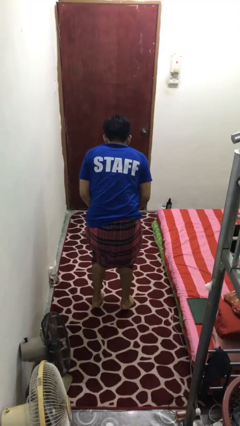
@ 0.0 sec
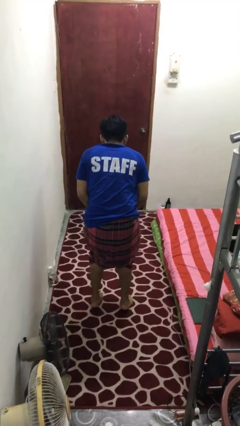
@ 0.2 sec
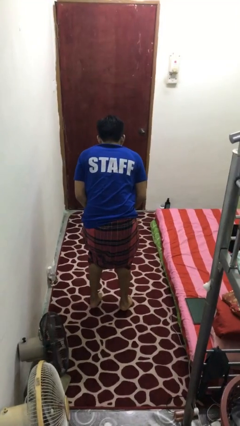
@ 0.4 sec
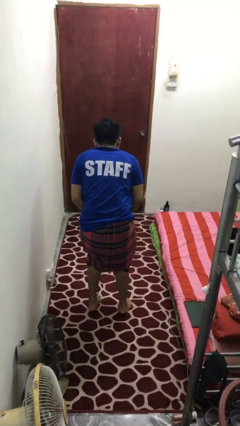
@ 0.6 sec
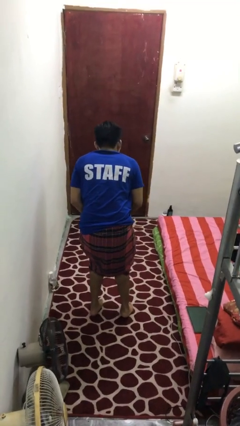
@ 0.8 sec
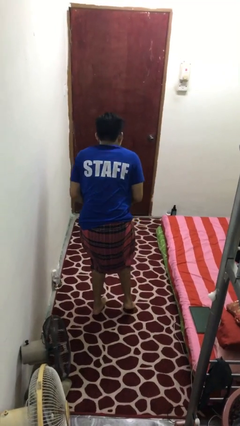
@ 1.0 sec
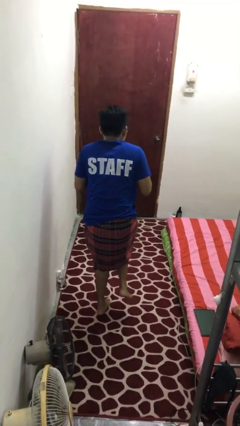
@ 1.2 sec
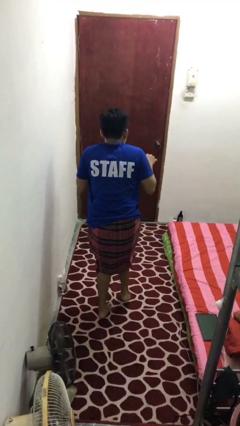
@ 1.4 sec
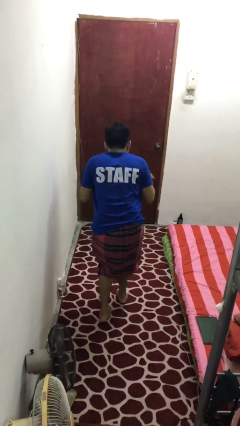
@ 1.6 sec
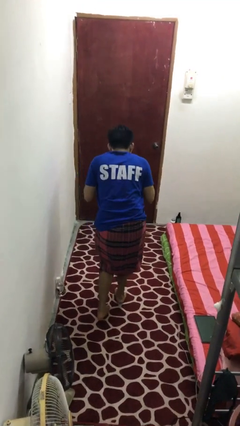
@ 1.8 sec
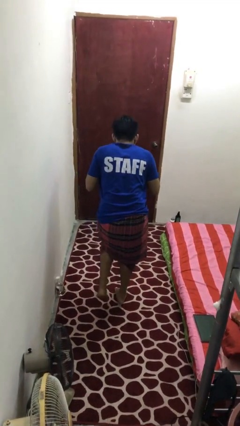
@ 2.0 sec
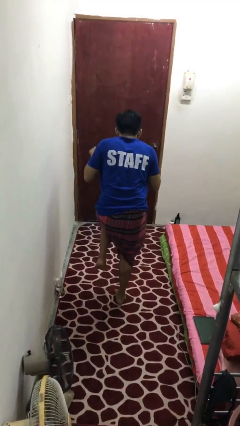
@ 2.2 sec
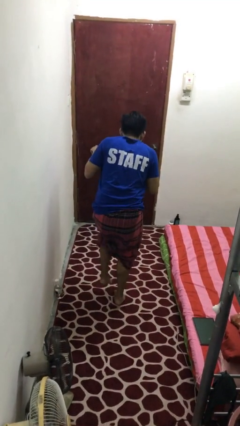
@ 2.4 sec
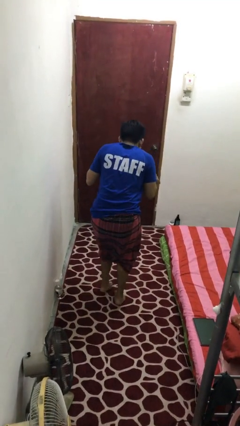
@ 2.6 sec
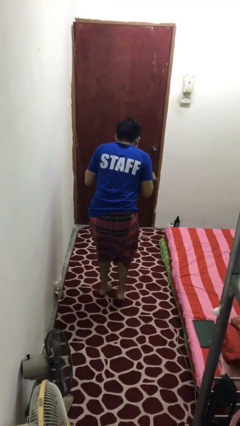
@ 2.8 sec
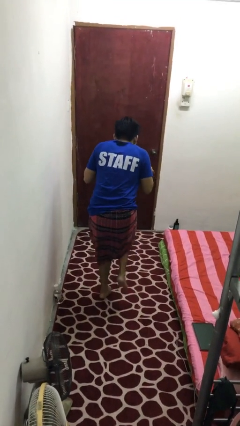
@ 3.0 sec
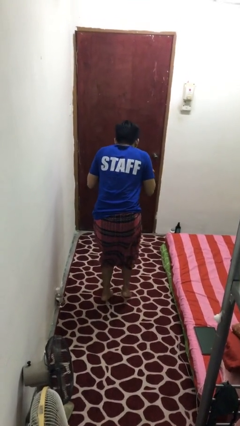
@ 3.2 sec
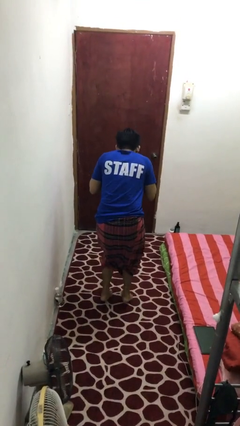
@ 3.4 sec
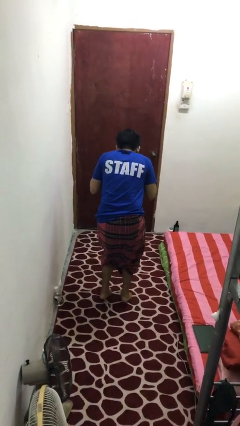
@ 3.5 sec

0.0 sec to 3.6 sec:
person walks tiptoe

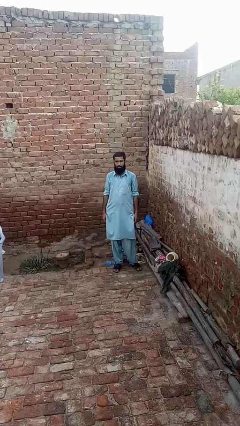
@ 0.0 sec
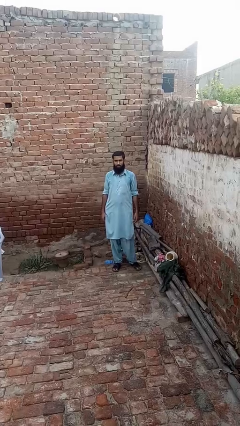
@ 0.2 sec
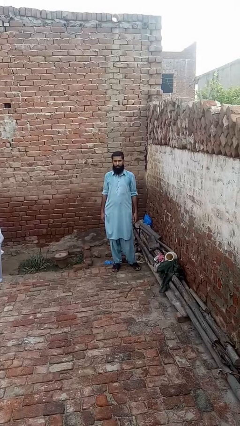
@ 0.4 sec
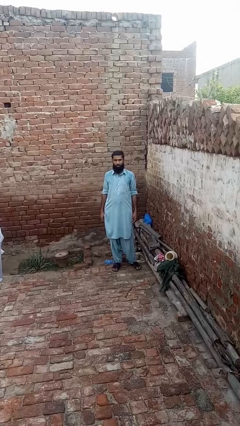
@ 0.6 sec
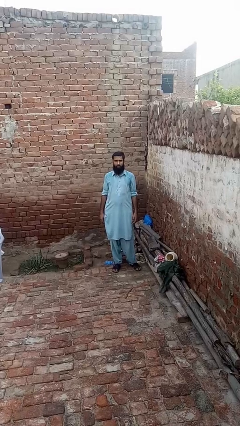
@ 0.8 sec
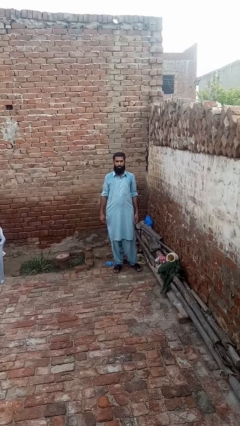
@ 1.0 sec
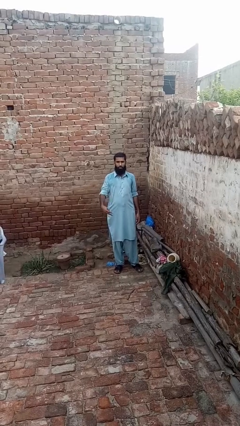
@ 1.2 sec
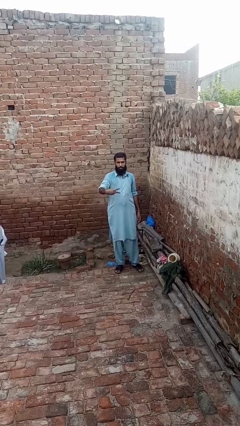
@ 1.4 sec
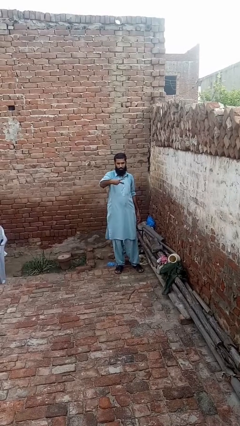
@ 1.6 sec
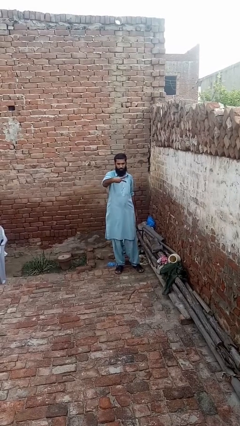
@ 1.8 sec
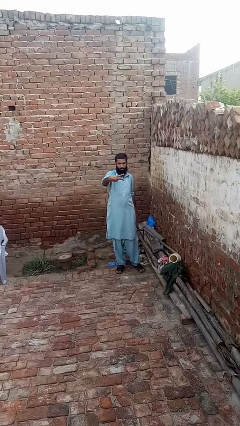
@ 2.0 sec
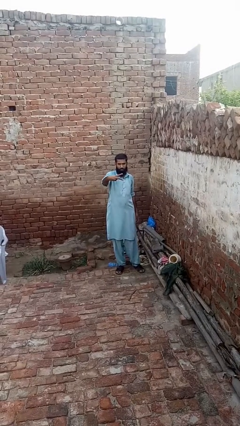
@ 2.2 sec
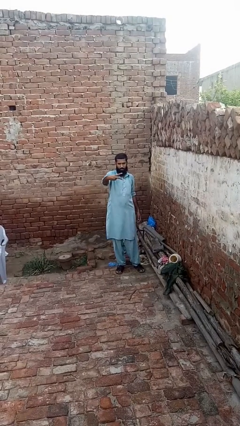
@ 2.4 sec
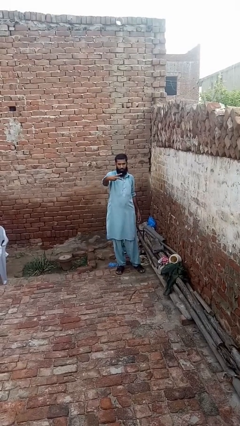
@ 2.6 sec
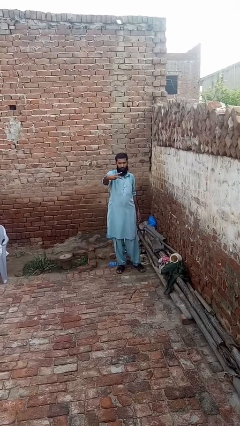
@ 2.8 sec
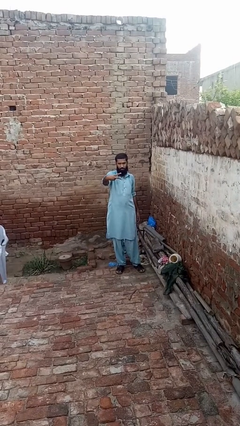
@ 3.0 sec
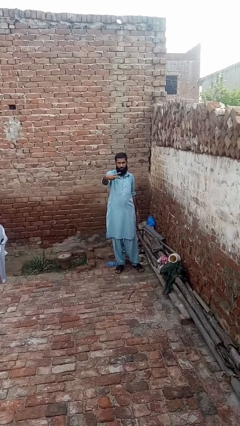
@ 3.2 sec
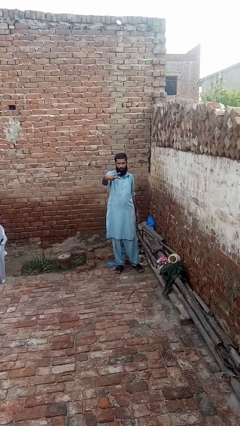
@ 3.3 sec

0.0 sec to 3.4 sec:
person gestures peace

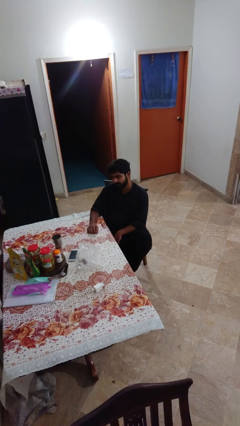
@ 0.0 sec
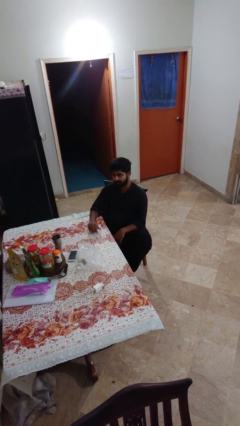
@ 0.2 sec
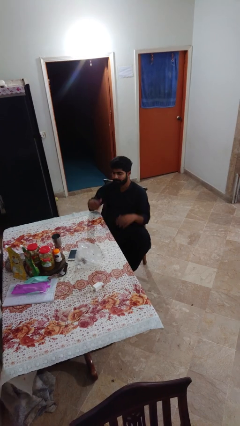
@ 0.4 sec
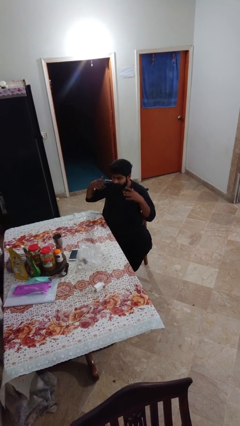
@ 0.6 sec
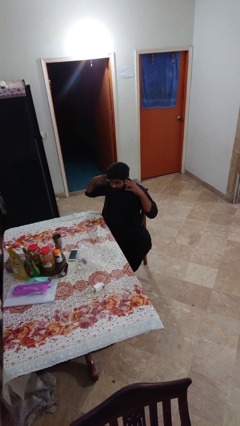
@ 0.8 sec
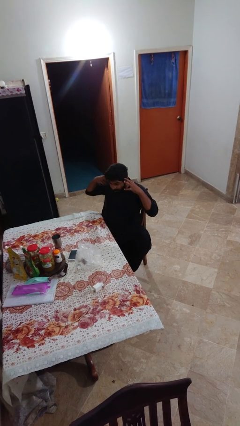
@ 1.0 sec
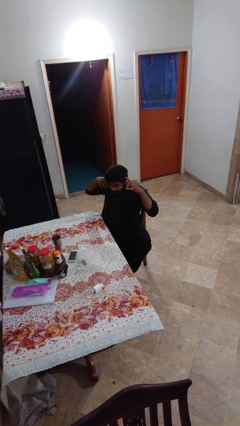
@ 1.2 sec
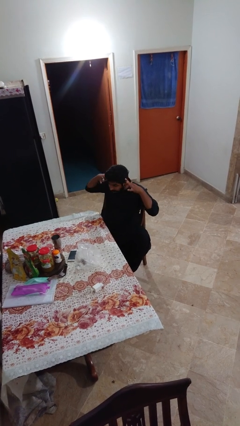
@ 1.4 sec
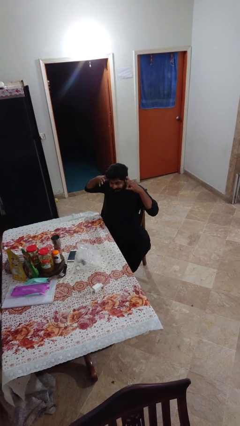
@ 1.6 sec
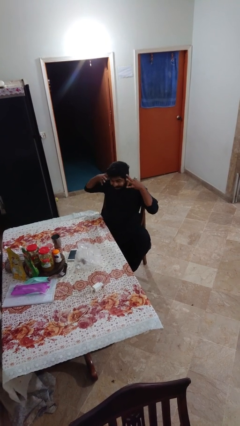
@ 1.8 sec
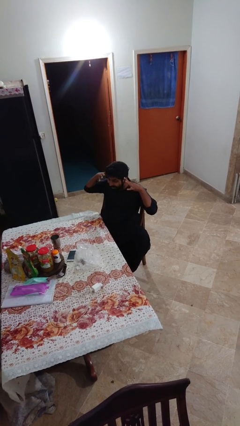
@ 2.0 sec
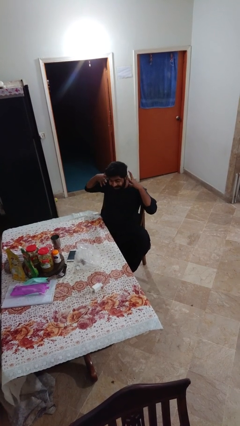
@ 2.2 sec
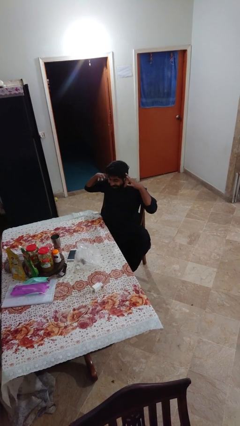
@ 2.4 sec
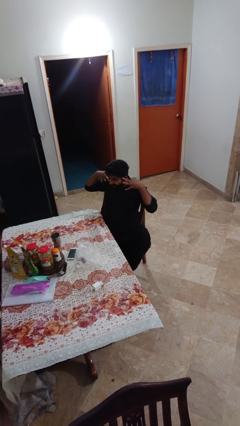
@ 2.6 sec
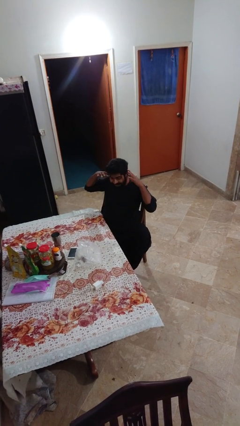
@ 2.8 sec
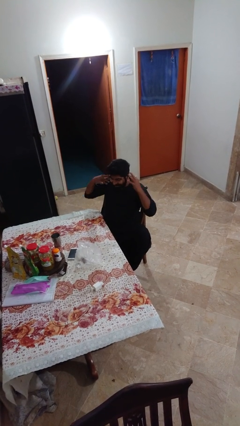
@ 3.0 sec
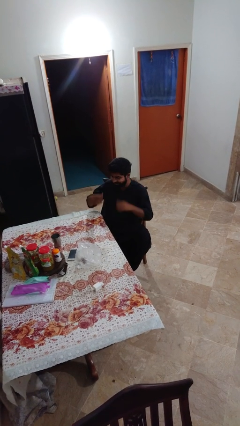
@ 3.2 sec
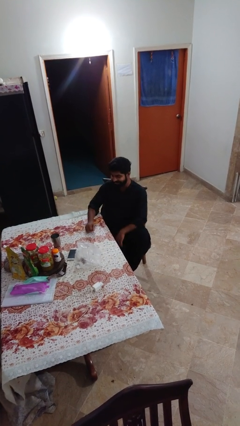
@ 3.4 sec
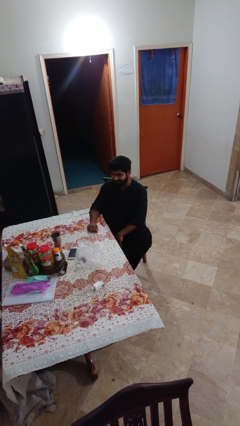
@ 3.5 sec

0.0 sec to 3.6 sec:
person puts fingers in ear

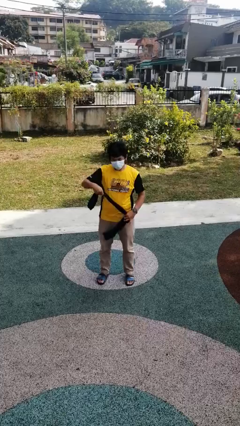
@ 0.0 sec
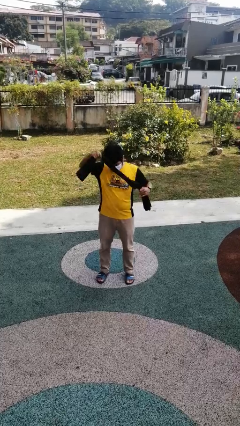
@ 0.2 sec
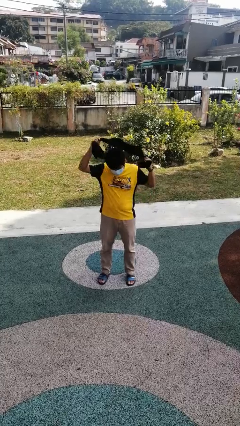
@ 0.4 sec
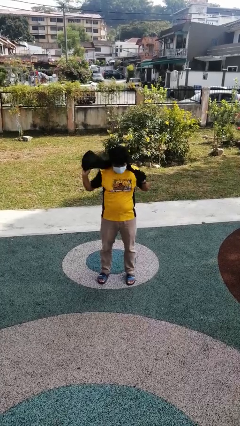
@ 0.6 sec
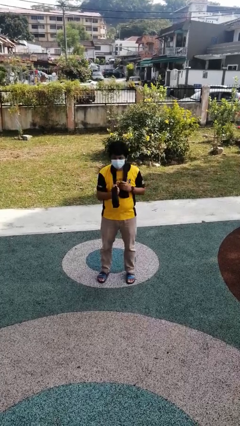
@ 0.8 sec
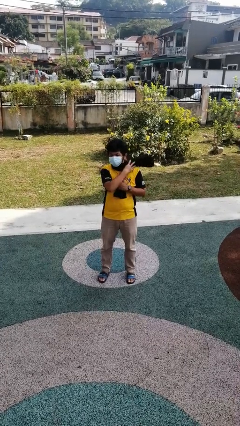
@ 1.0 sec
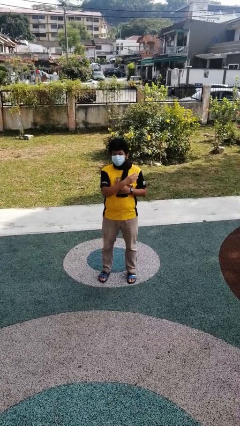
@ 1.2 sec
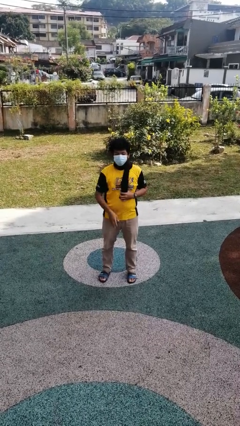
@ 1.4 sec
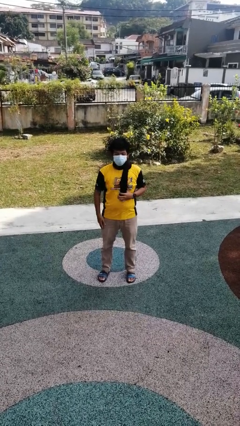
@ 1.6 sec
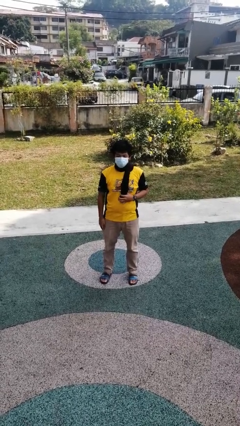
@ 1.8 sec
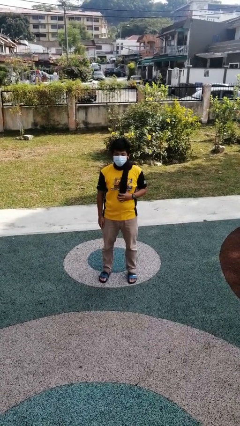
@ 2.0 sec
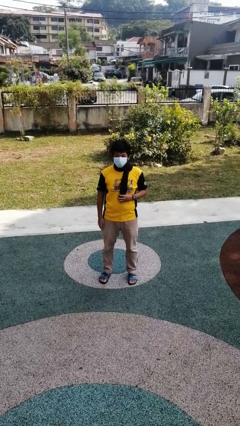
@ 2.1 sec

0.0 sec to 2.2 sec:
person puts on scarf

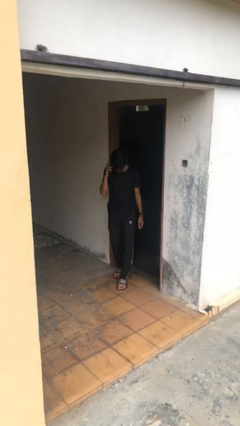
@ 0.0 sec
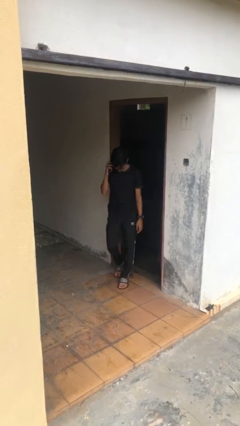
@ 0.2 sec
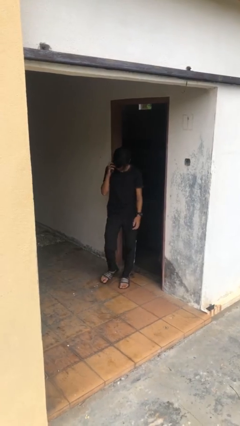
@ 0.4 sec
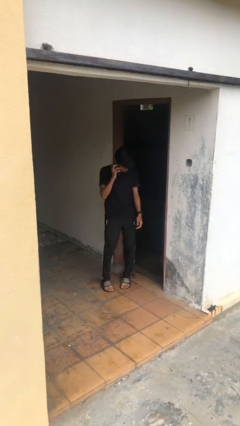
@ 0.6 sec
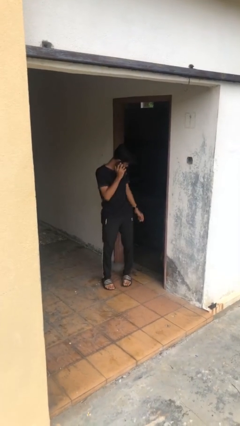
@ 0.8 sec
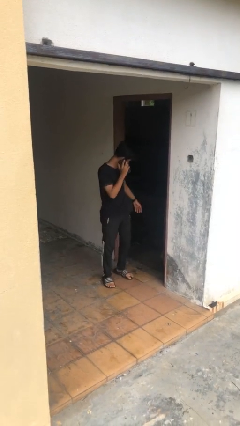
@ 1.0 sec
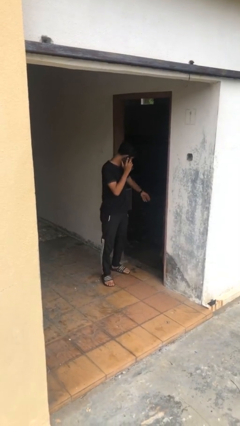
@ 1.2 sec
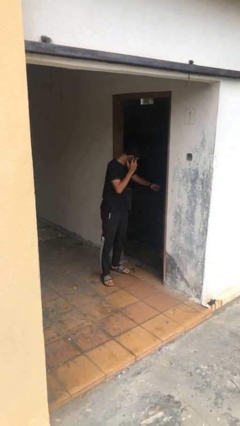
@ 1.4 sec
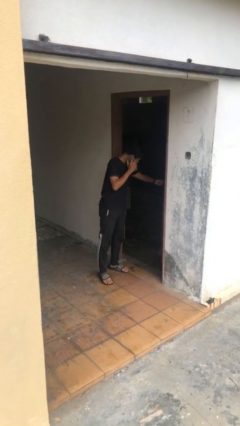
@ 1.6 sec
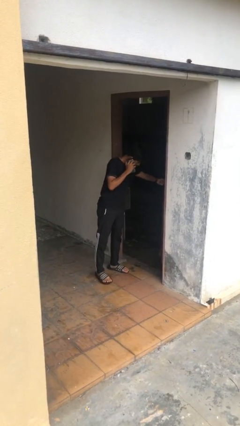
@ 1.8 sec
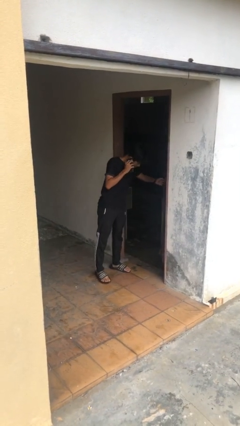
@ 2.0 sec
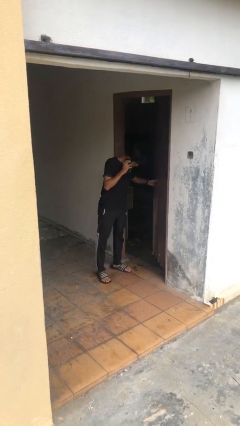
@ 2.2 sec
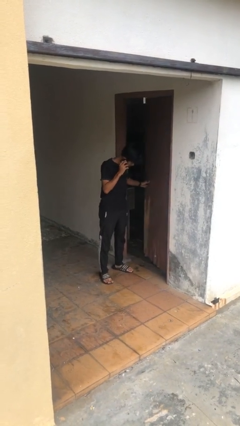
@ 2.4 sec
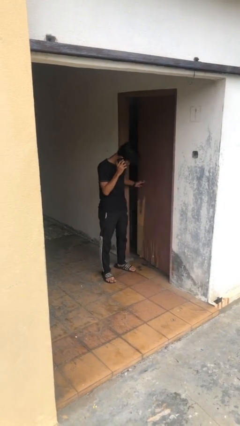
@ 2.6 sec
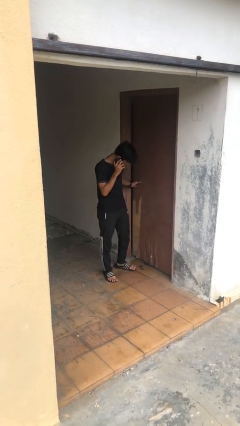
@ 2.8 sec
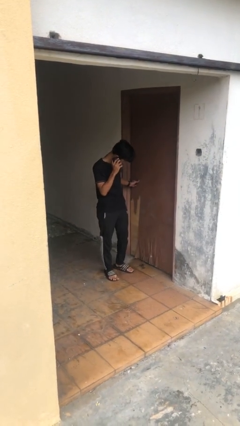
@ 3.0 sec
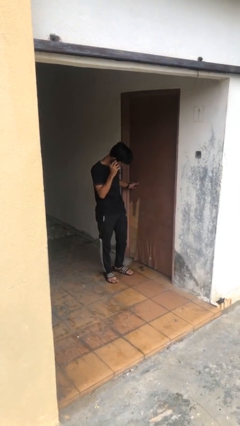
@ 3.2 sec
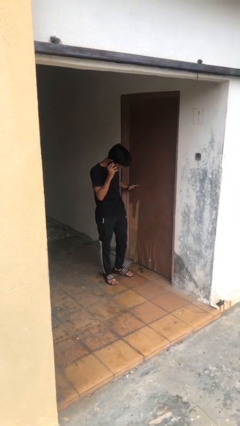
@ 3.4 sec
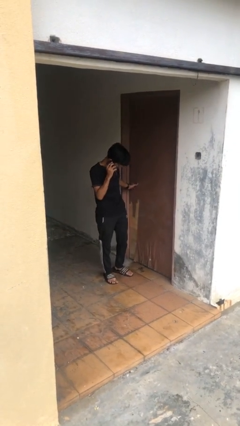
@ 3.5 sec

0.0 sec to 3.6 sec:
person closes facility door

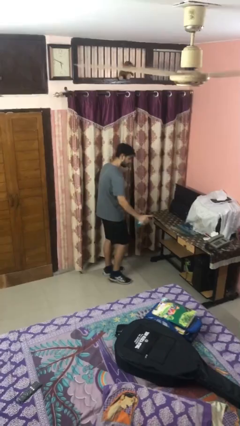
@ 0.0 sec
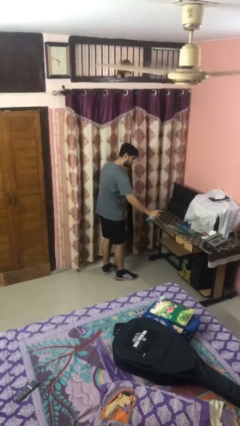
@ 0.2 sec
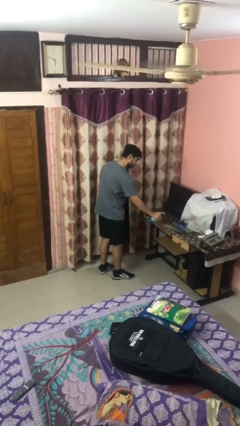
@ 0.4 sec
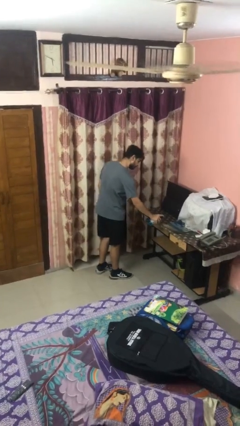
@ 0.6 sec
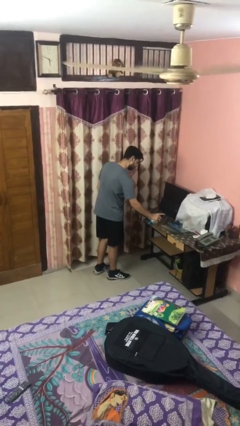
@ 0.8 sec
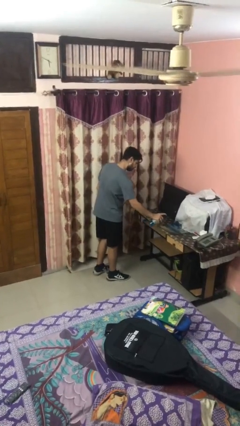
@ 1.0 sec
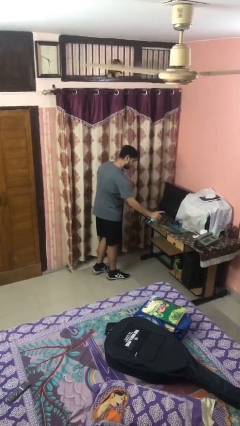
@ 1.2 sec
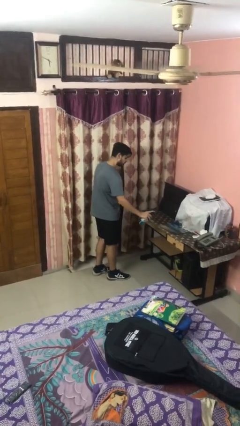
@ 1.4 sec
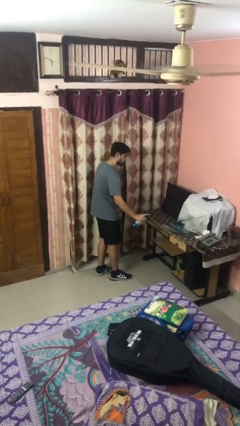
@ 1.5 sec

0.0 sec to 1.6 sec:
person sprays from bottle
